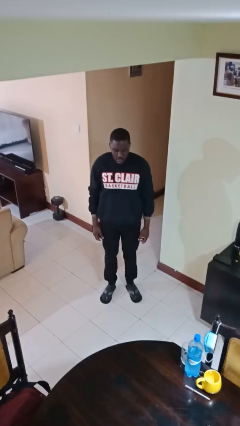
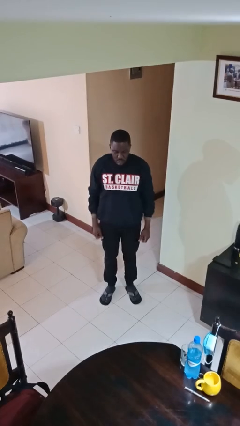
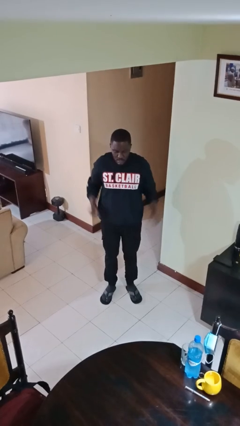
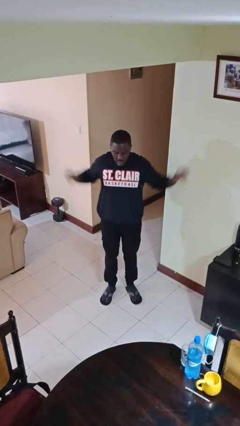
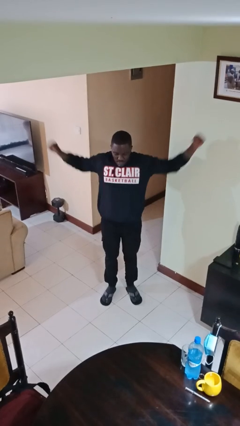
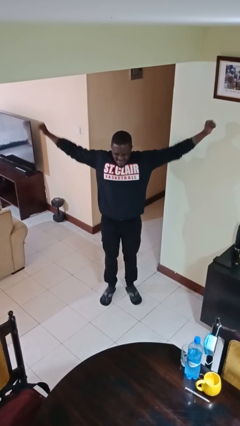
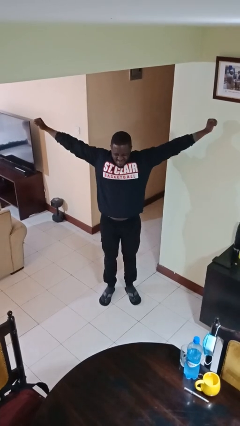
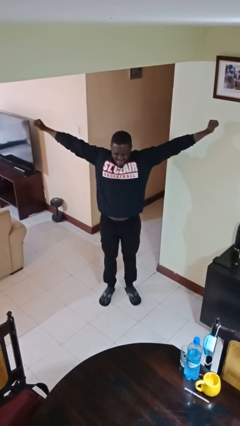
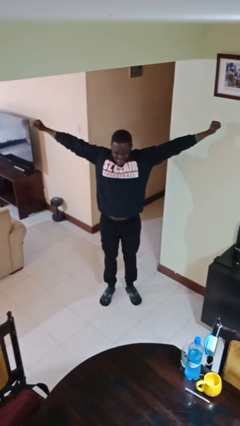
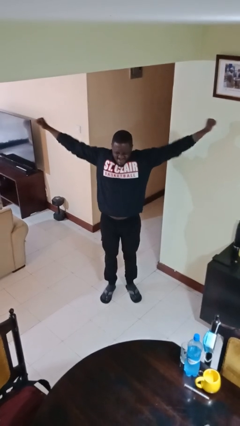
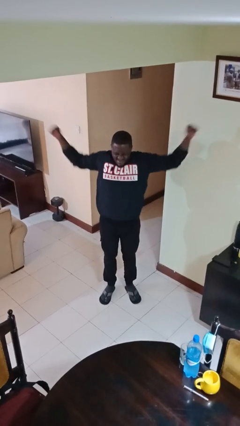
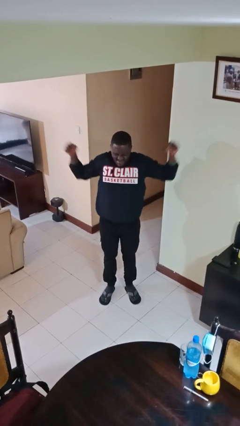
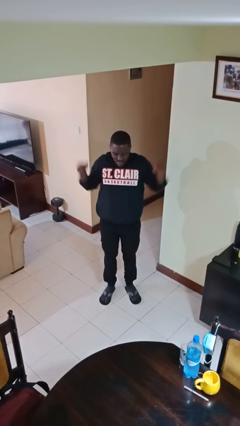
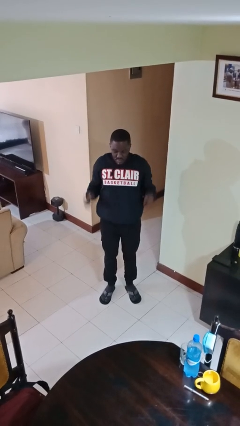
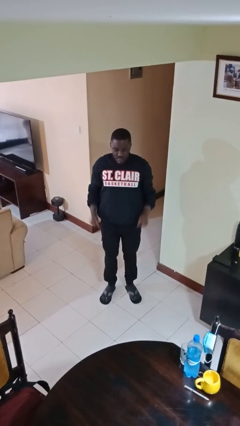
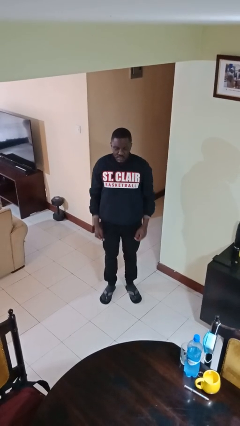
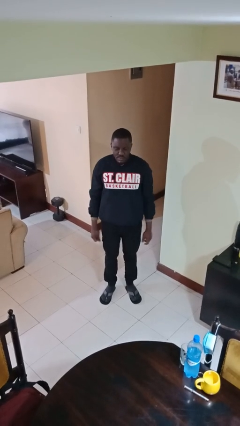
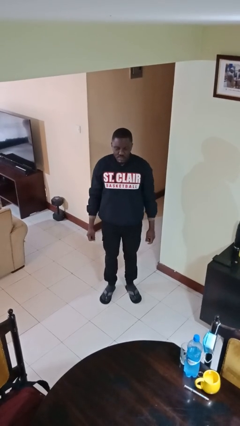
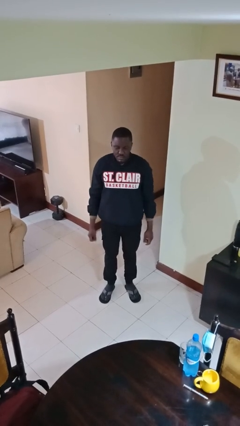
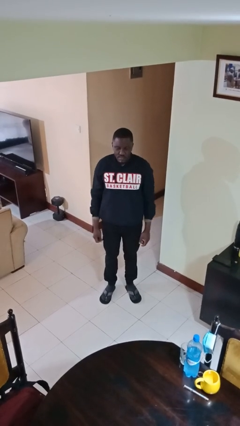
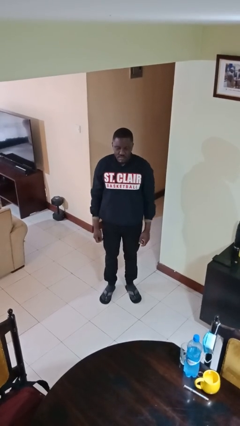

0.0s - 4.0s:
person stretches arms to side

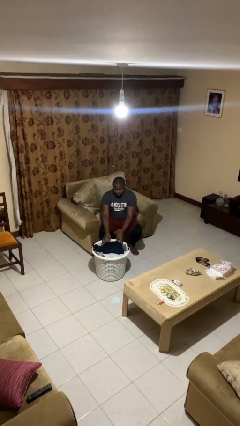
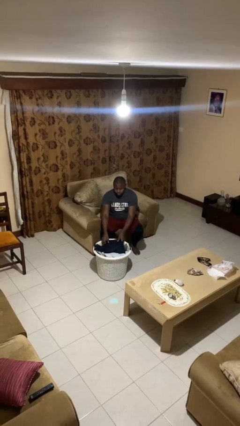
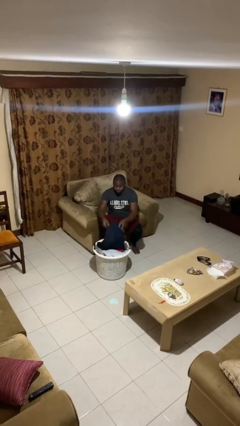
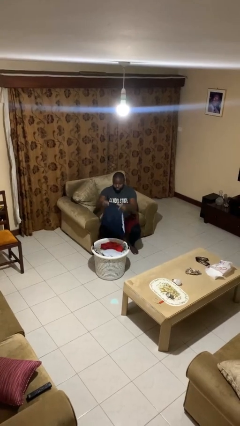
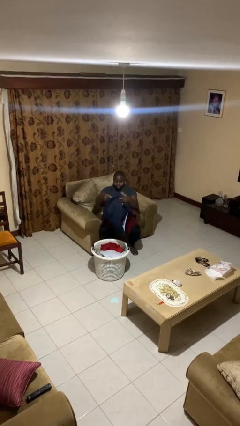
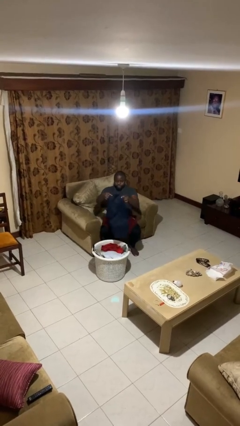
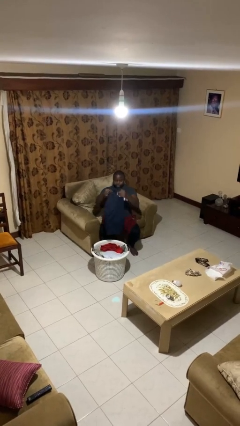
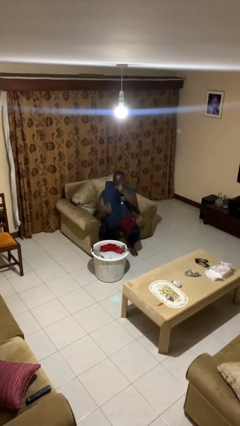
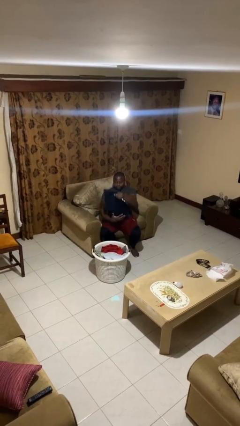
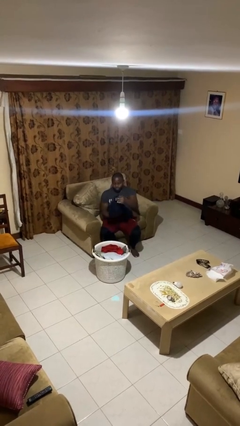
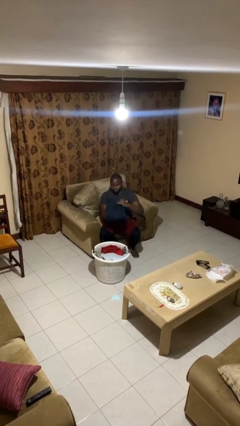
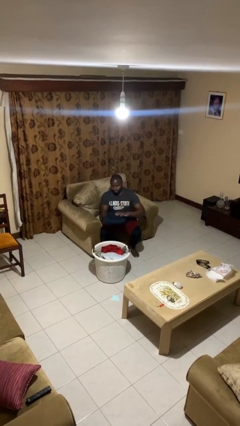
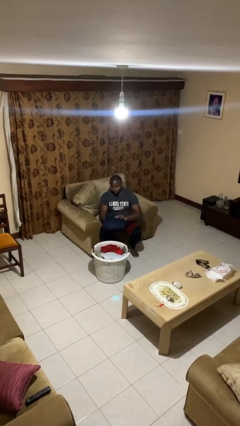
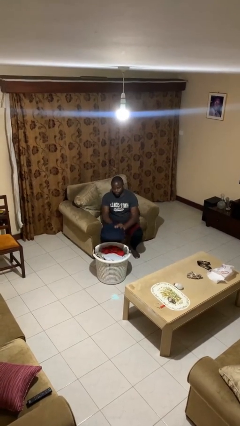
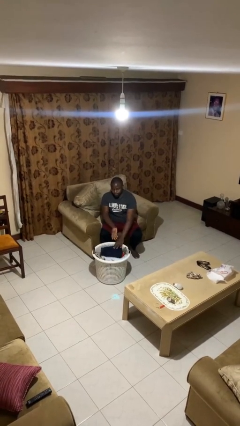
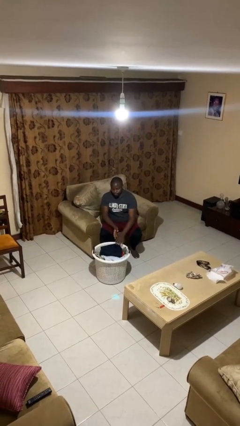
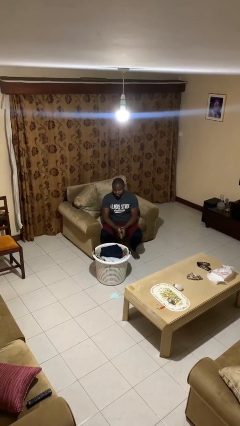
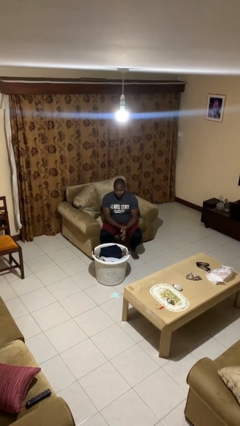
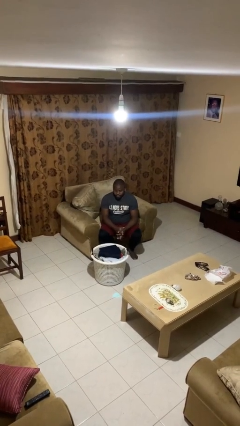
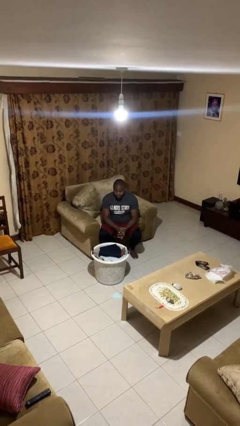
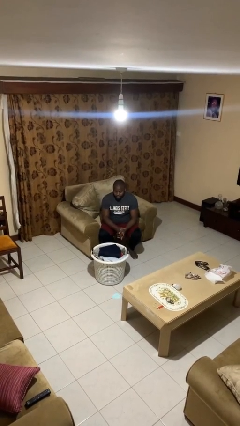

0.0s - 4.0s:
person folds pants

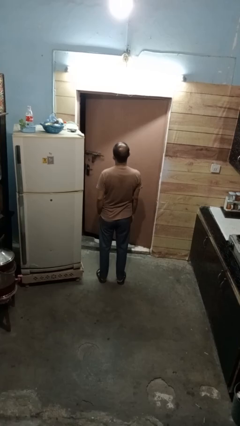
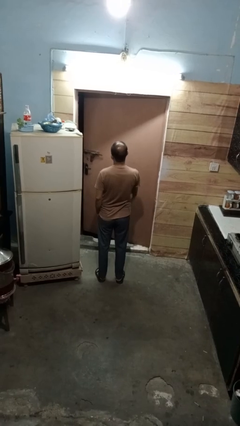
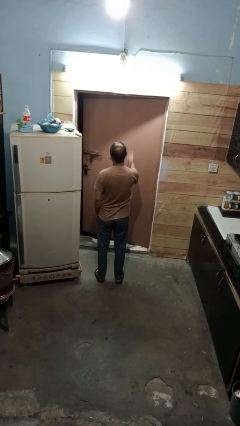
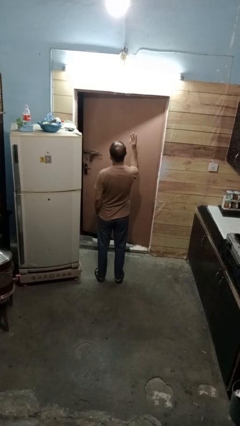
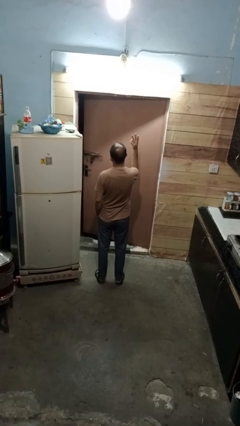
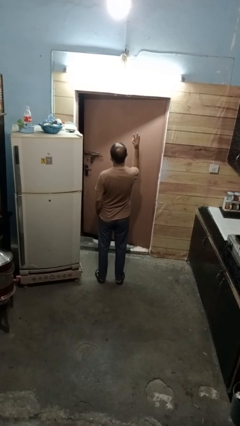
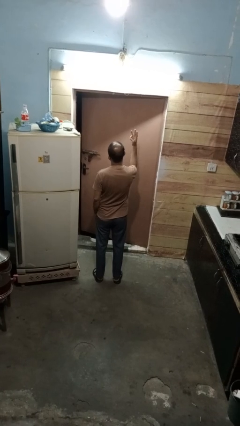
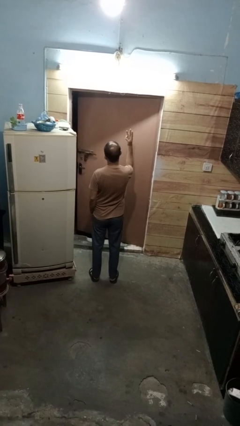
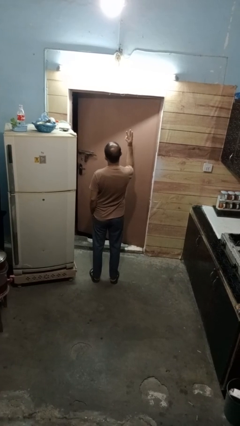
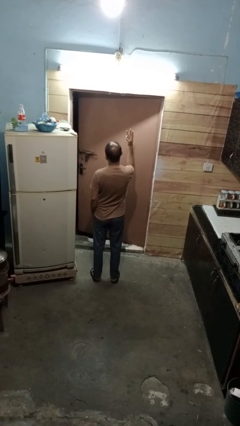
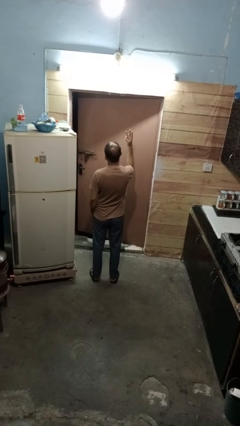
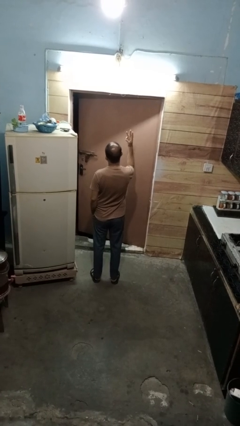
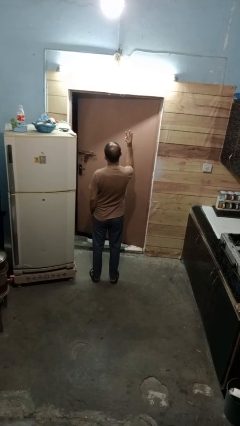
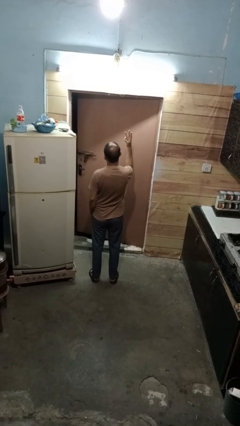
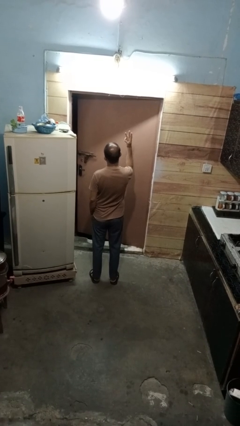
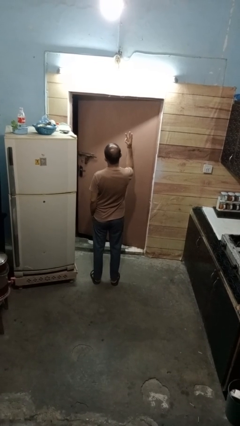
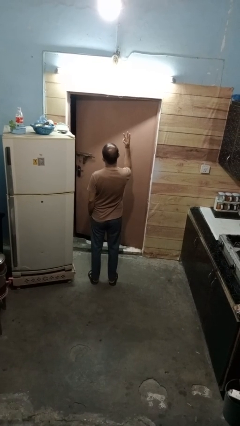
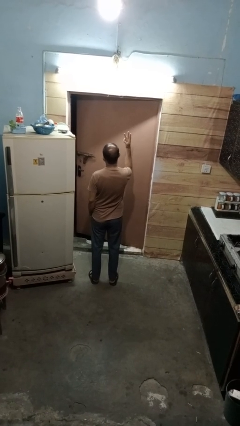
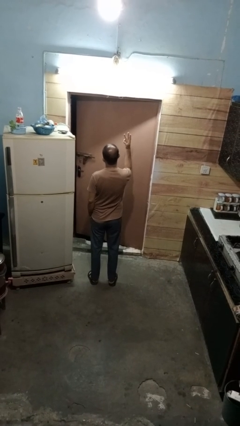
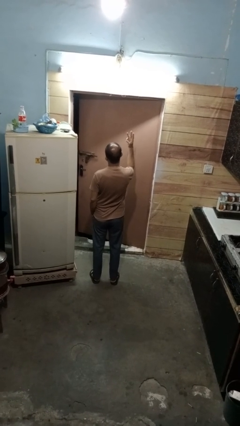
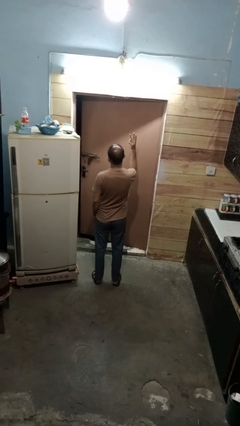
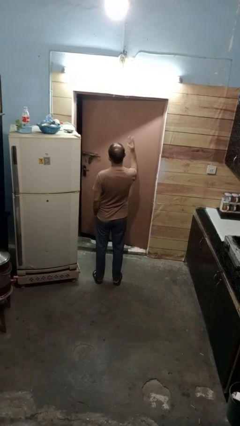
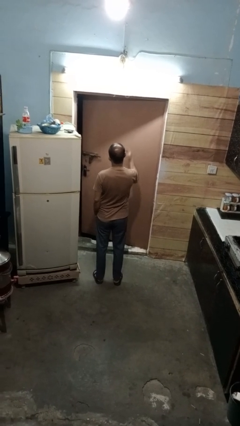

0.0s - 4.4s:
person gestures number three

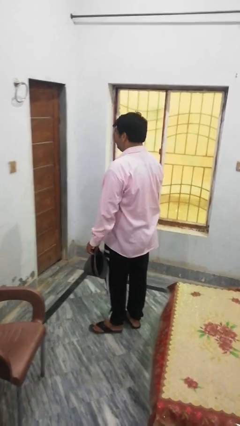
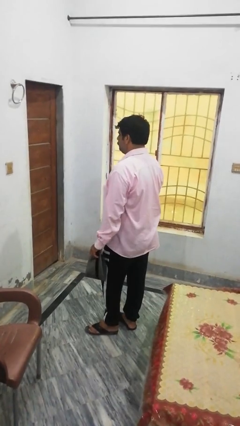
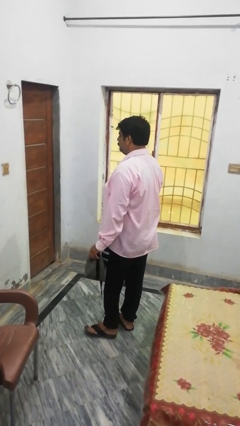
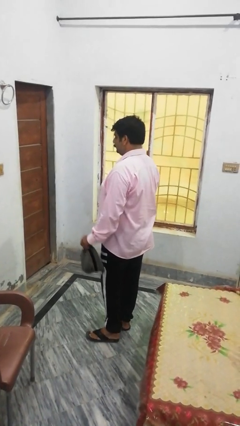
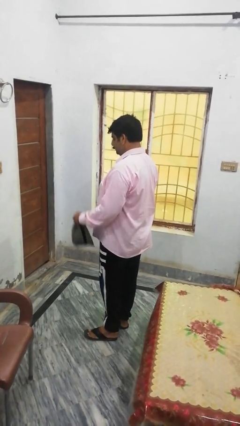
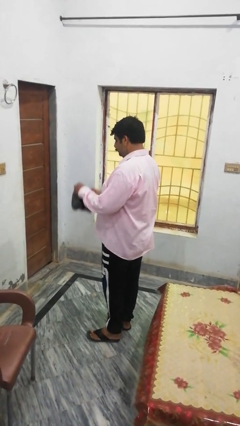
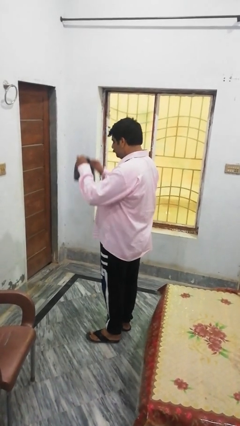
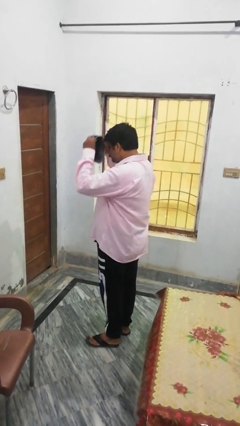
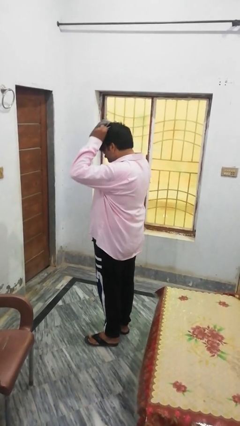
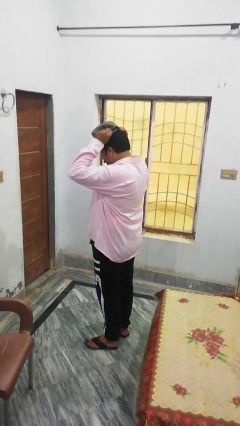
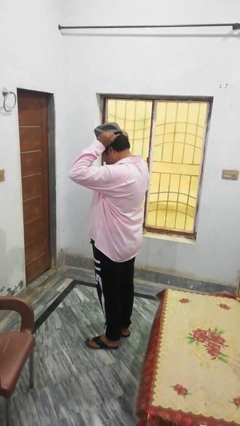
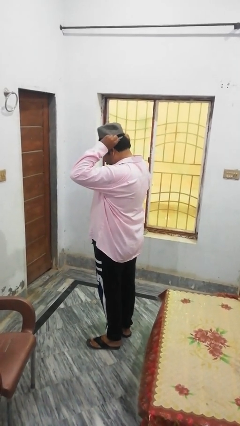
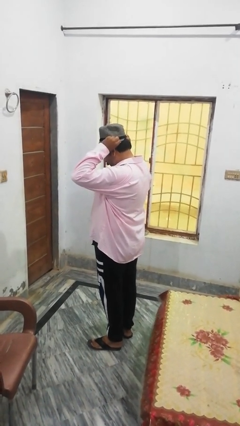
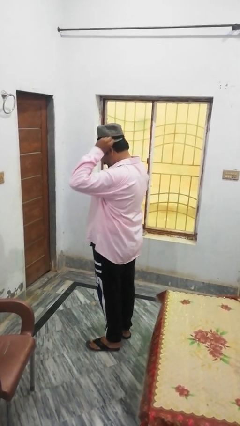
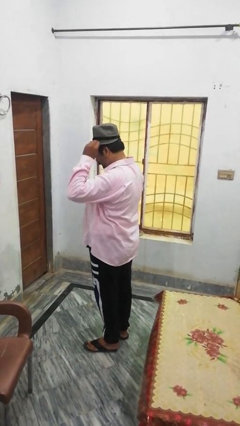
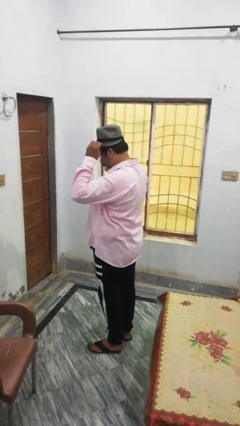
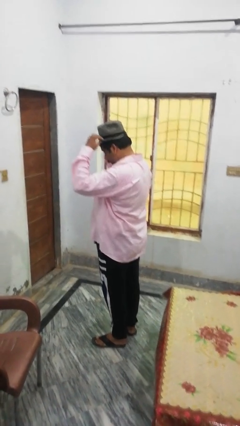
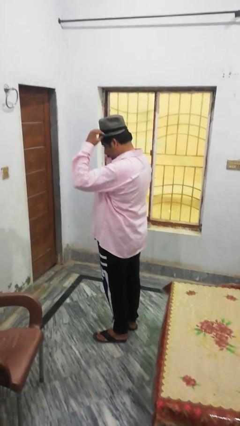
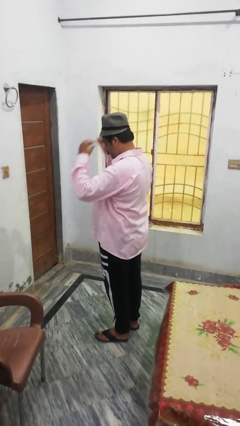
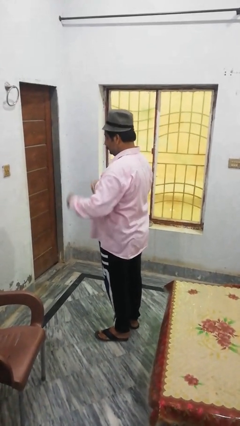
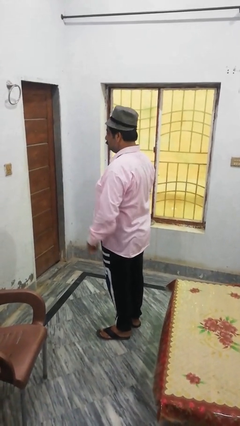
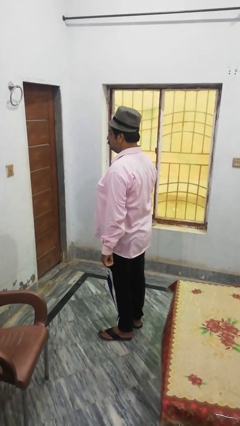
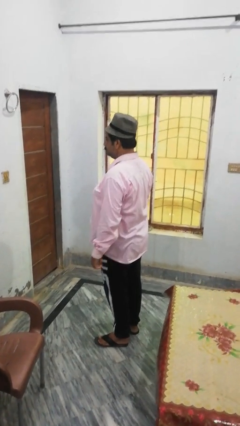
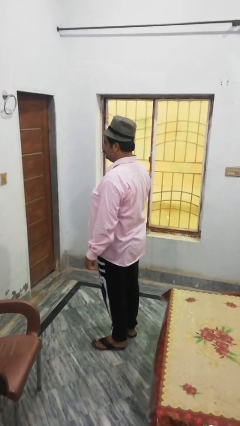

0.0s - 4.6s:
person puts on hat

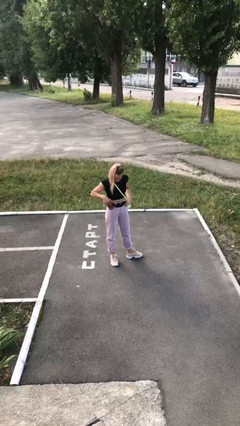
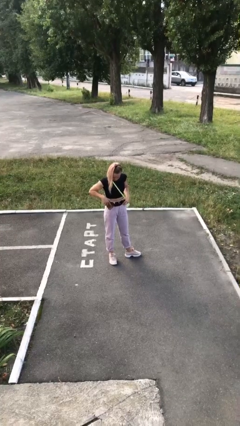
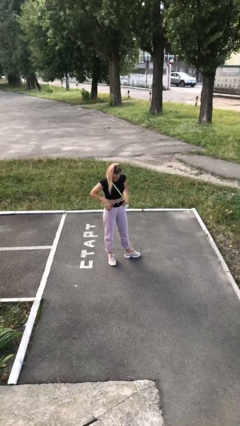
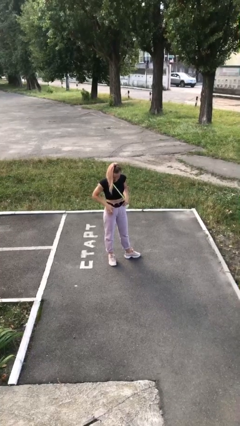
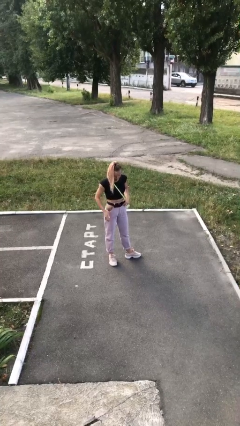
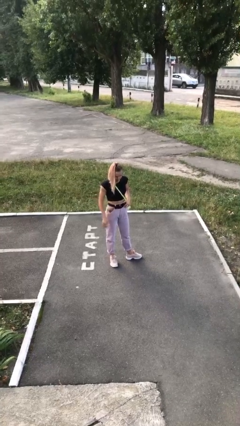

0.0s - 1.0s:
person puts phone into pocket
